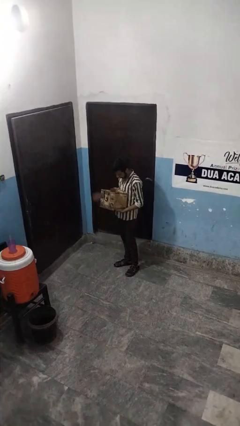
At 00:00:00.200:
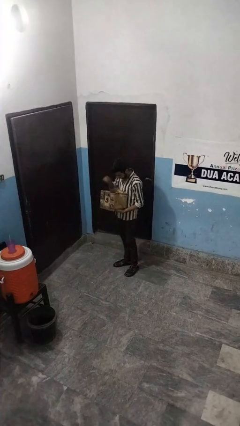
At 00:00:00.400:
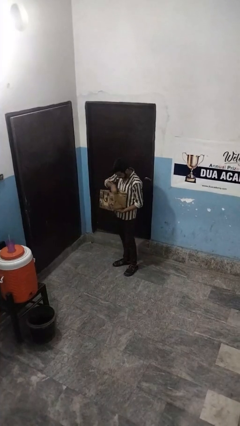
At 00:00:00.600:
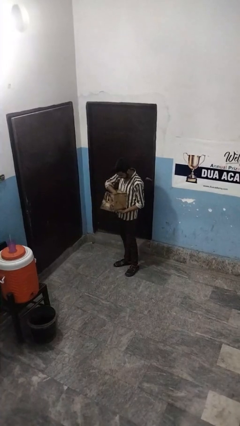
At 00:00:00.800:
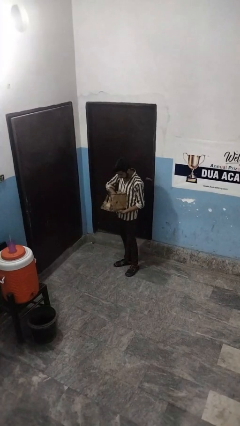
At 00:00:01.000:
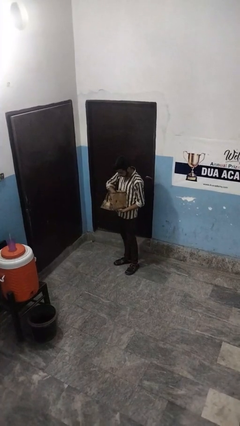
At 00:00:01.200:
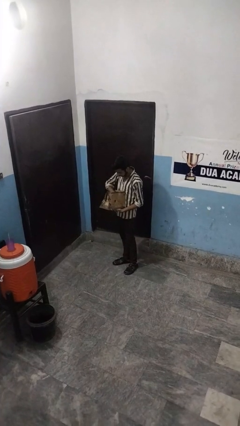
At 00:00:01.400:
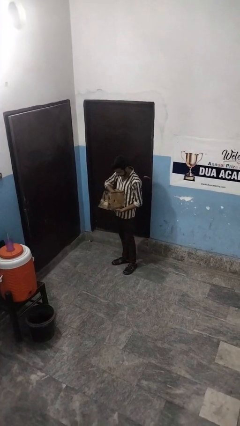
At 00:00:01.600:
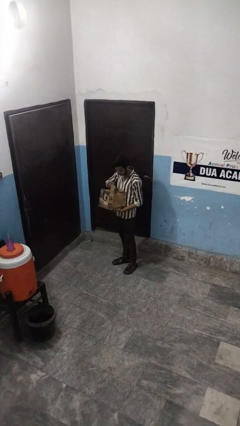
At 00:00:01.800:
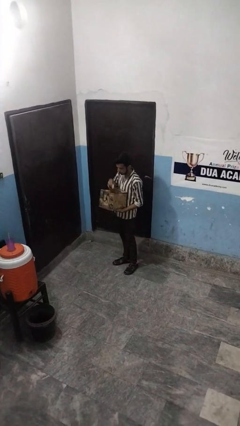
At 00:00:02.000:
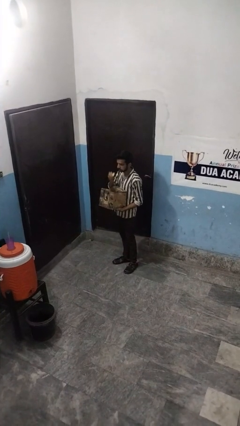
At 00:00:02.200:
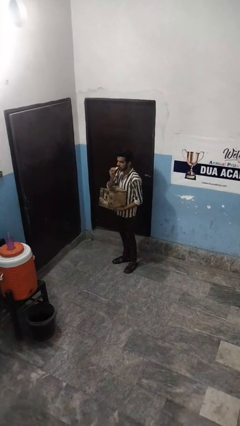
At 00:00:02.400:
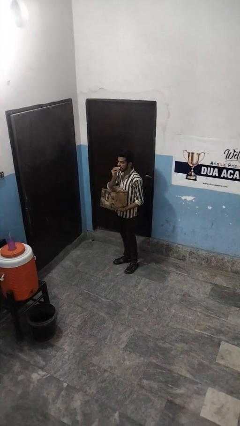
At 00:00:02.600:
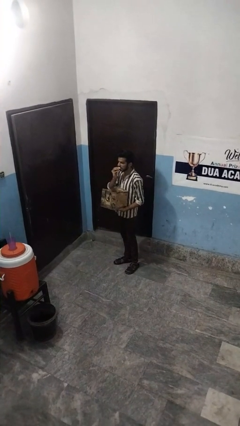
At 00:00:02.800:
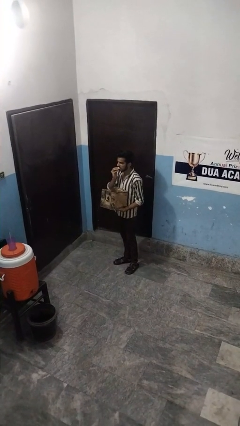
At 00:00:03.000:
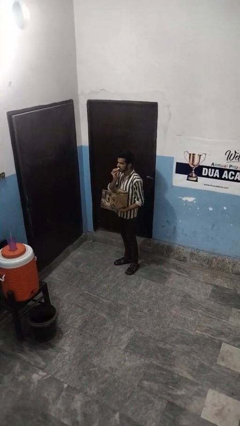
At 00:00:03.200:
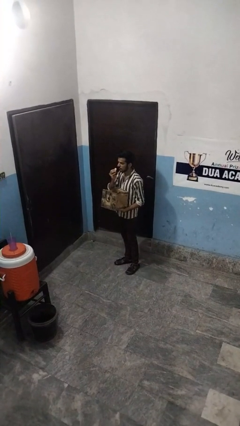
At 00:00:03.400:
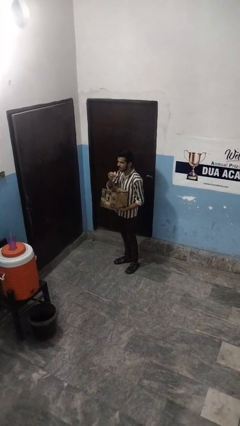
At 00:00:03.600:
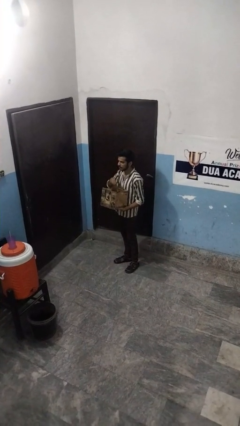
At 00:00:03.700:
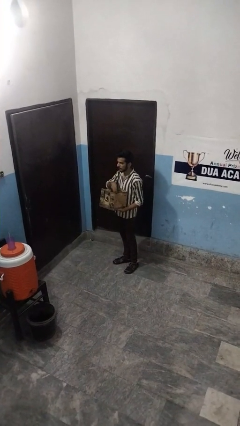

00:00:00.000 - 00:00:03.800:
person eats snack from bag

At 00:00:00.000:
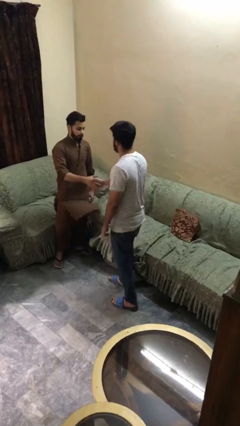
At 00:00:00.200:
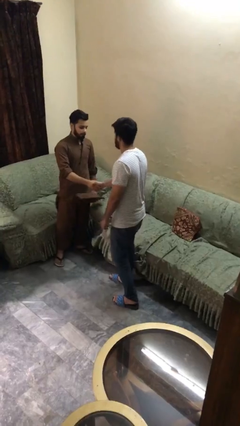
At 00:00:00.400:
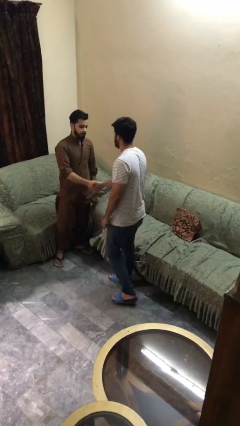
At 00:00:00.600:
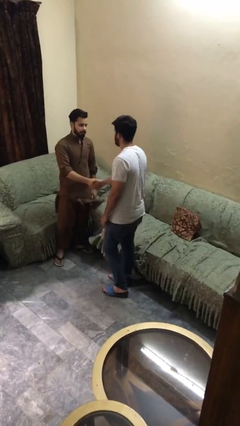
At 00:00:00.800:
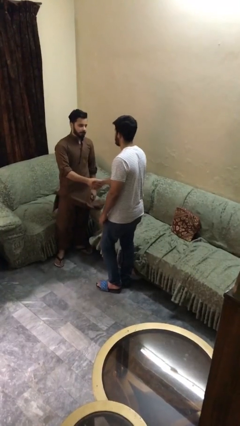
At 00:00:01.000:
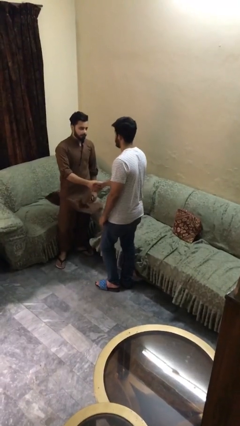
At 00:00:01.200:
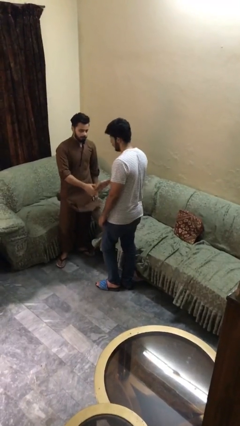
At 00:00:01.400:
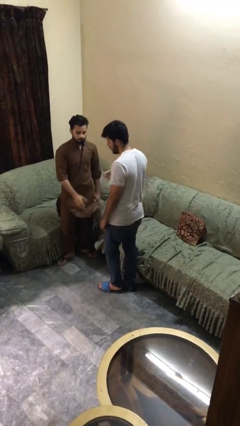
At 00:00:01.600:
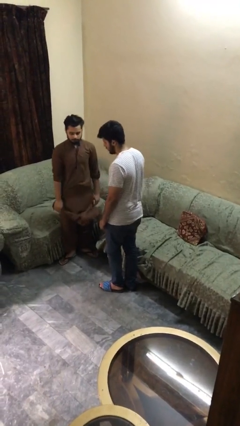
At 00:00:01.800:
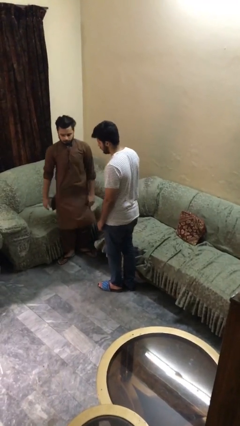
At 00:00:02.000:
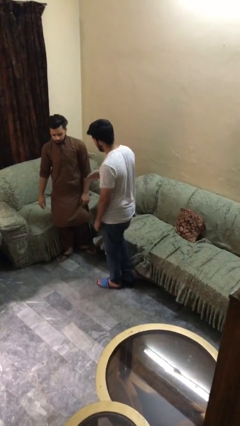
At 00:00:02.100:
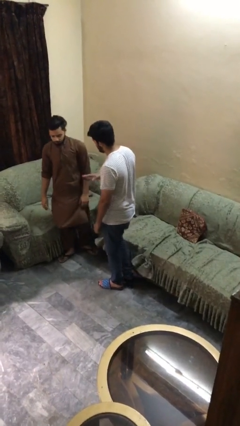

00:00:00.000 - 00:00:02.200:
person shakes hand

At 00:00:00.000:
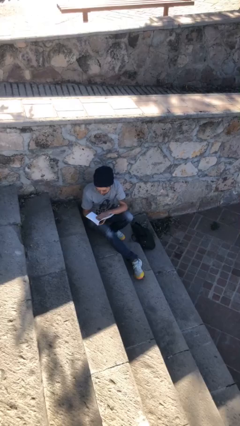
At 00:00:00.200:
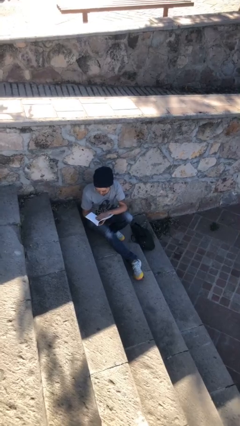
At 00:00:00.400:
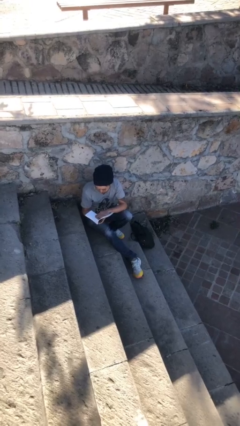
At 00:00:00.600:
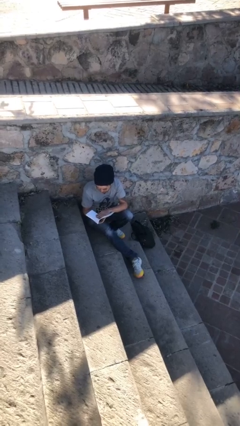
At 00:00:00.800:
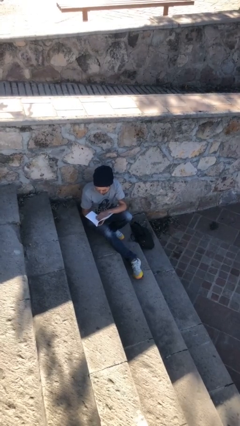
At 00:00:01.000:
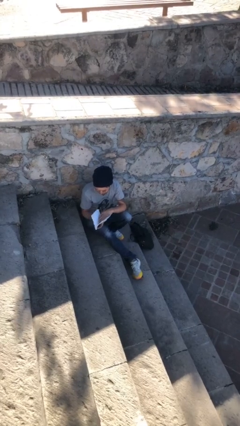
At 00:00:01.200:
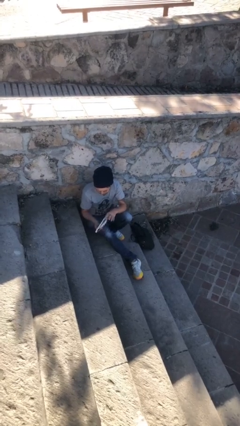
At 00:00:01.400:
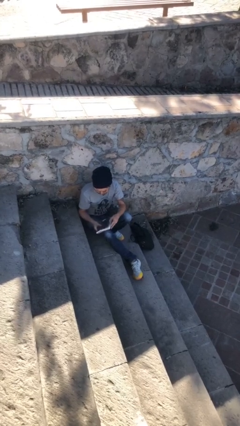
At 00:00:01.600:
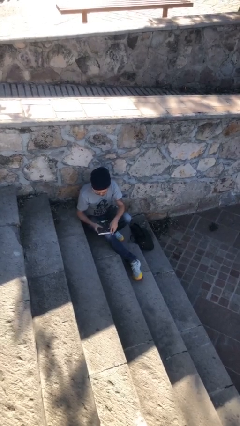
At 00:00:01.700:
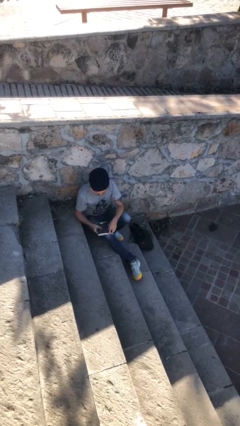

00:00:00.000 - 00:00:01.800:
person reads document

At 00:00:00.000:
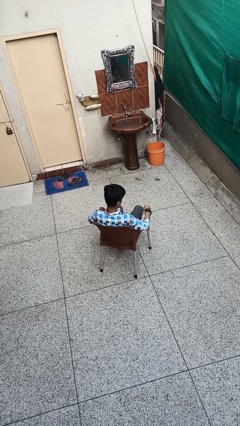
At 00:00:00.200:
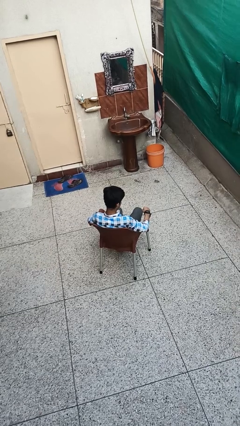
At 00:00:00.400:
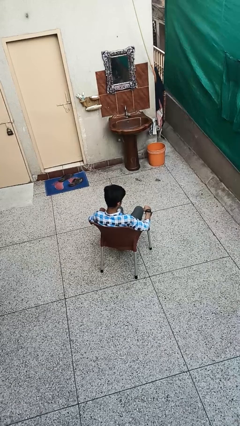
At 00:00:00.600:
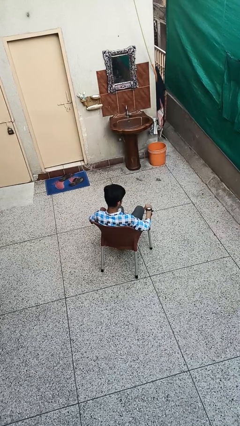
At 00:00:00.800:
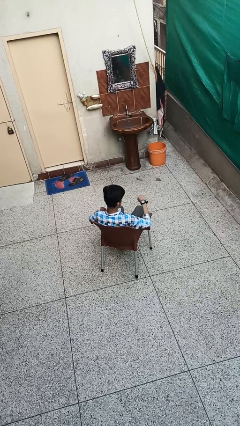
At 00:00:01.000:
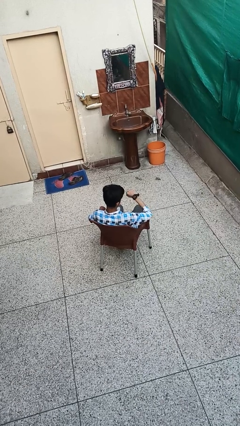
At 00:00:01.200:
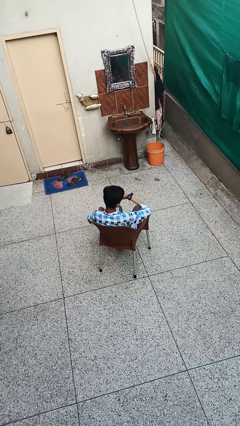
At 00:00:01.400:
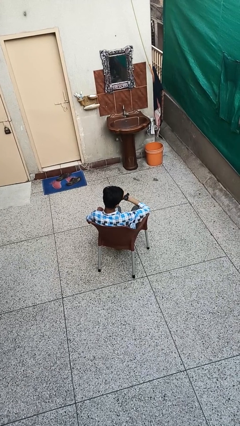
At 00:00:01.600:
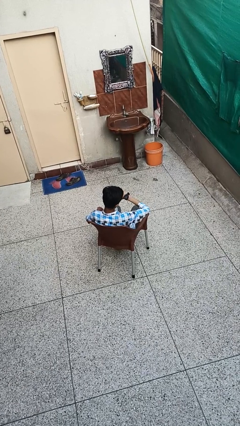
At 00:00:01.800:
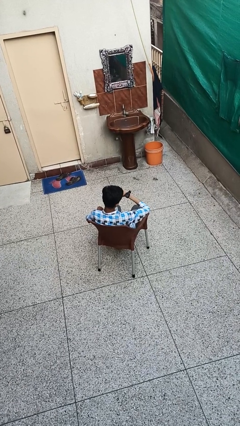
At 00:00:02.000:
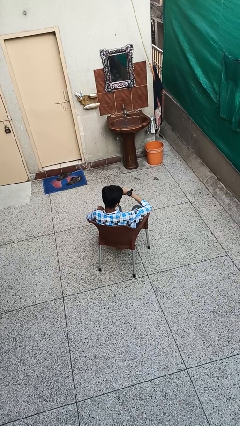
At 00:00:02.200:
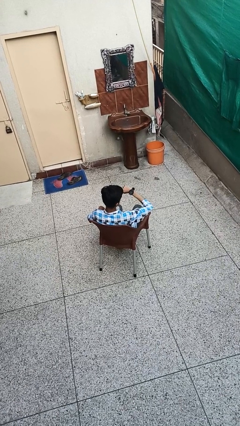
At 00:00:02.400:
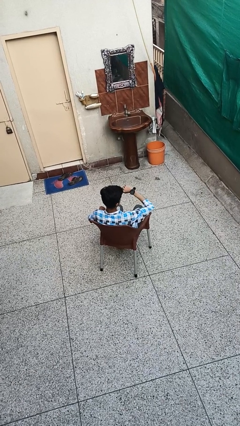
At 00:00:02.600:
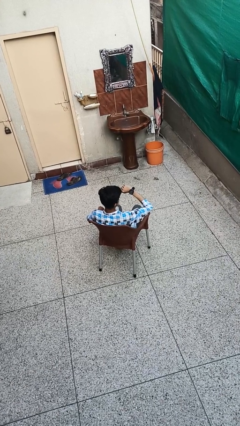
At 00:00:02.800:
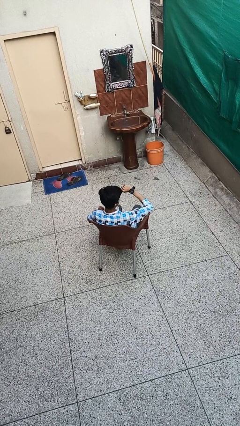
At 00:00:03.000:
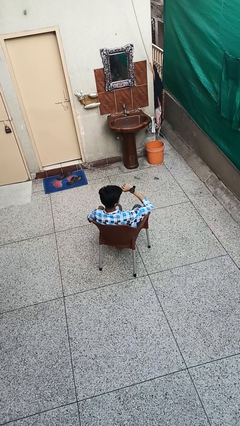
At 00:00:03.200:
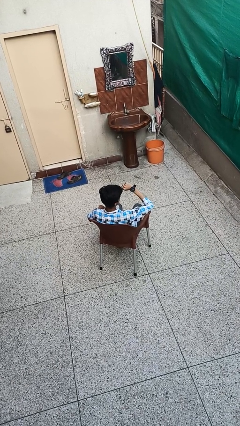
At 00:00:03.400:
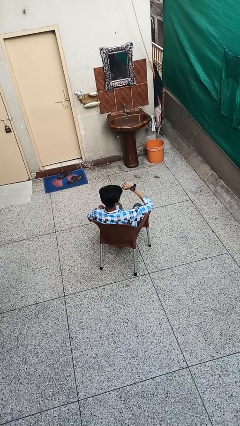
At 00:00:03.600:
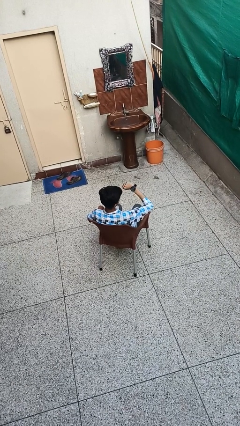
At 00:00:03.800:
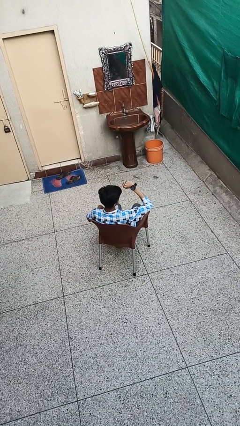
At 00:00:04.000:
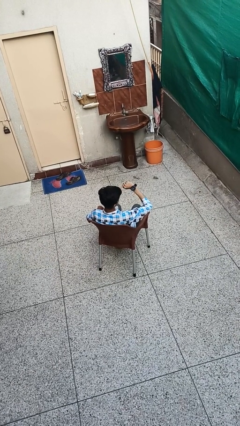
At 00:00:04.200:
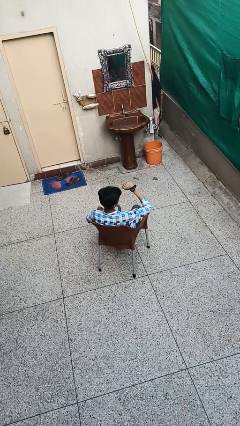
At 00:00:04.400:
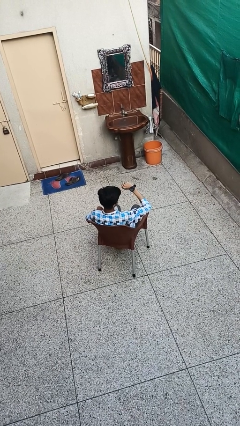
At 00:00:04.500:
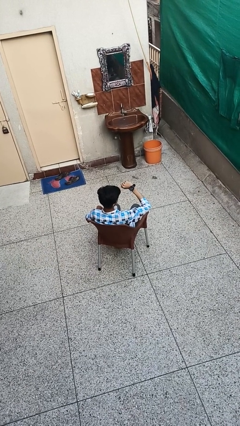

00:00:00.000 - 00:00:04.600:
person looks at wristwatch

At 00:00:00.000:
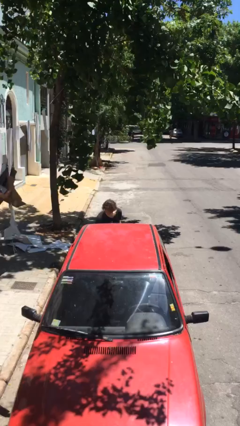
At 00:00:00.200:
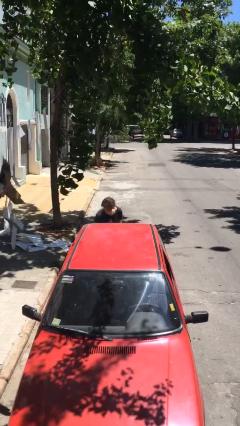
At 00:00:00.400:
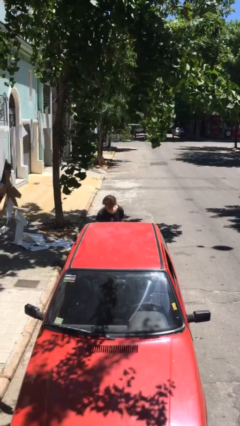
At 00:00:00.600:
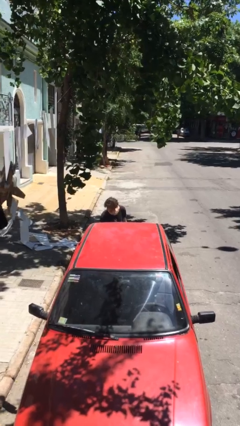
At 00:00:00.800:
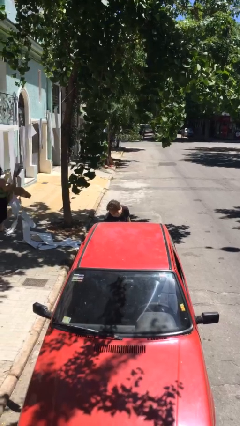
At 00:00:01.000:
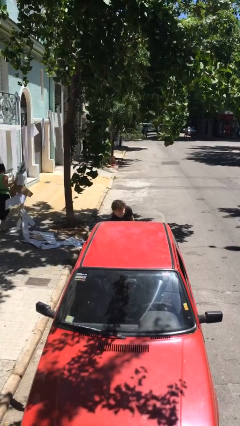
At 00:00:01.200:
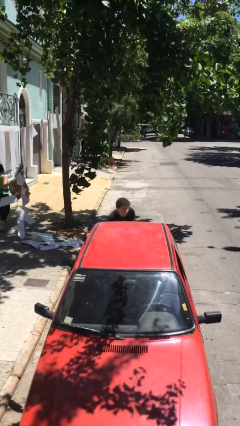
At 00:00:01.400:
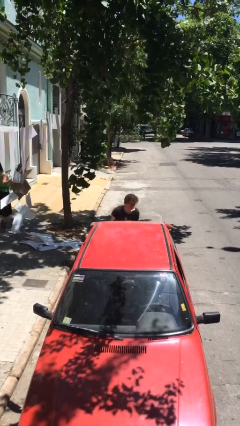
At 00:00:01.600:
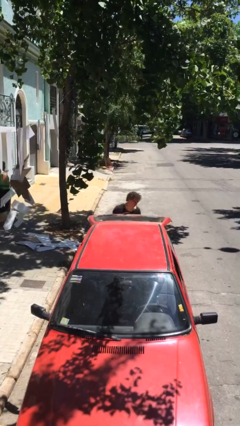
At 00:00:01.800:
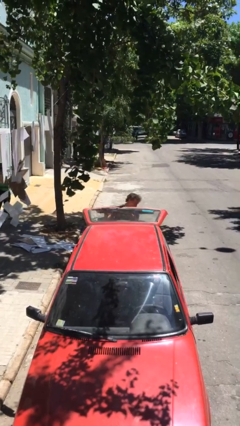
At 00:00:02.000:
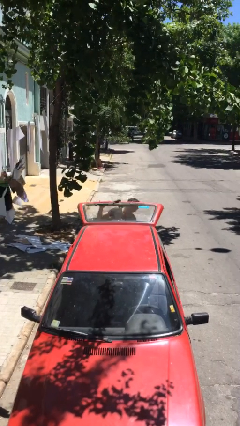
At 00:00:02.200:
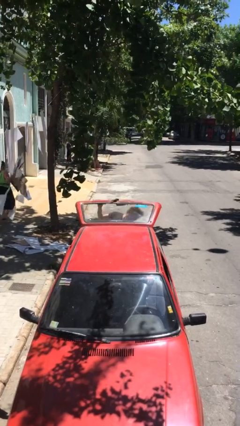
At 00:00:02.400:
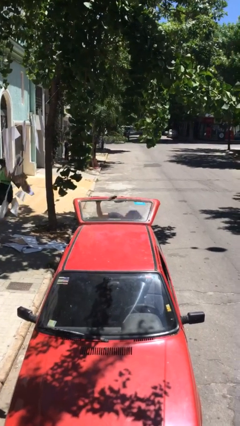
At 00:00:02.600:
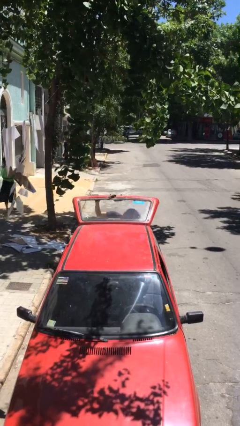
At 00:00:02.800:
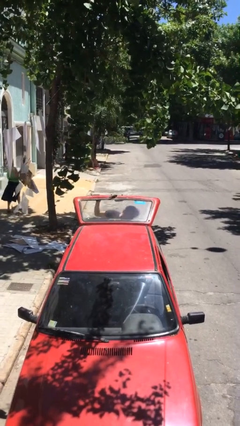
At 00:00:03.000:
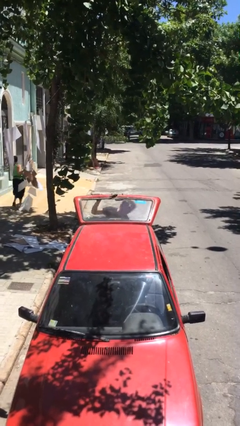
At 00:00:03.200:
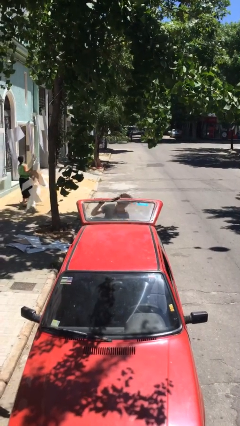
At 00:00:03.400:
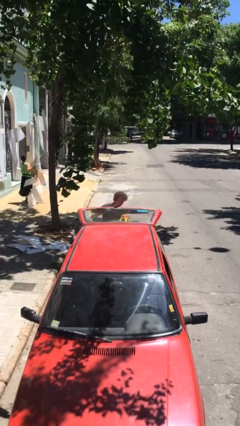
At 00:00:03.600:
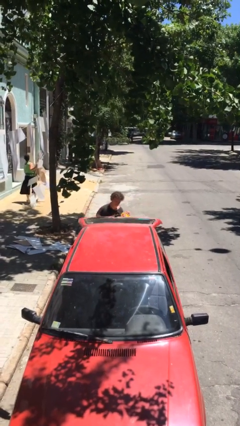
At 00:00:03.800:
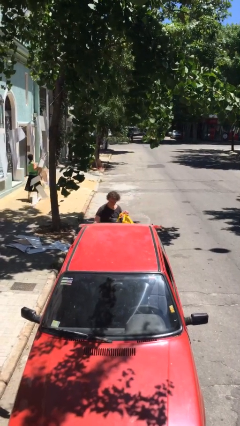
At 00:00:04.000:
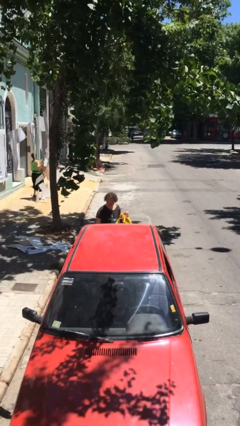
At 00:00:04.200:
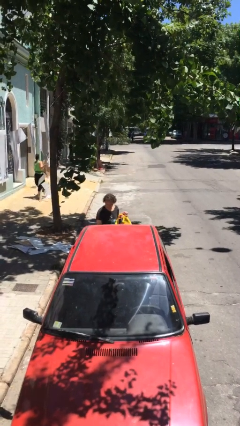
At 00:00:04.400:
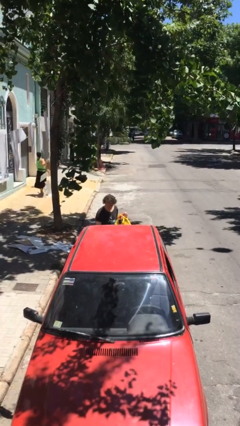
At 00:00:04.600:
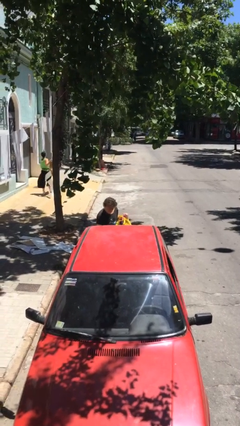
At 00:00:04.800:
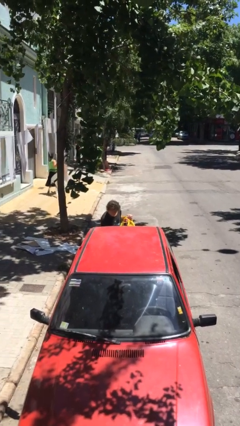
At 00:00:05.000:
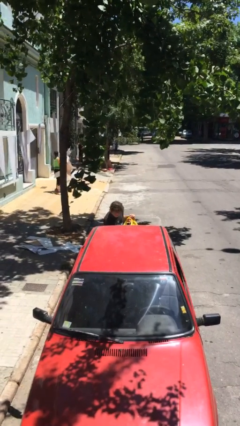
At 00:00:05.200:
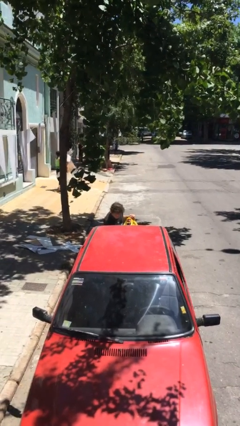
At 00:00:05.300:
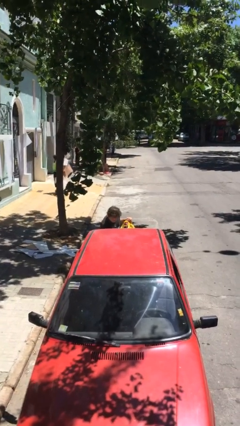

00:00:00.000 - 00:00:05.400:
person unloads car
